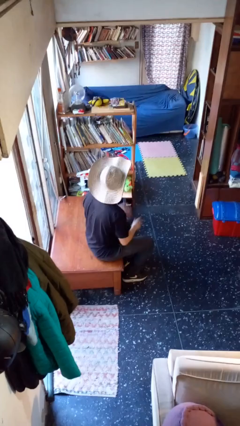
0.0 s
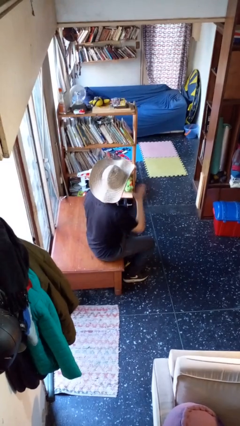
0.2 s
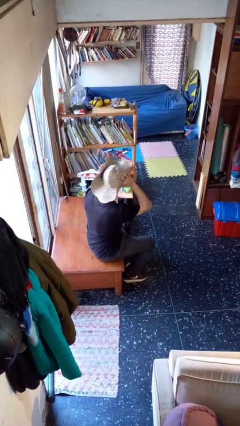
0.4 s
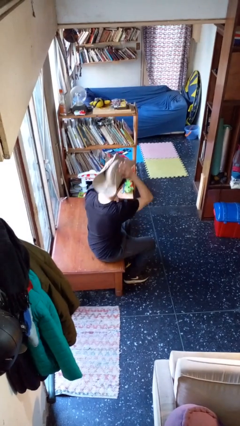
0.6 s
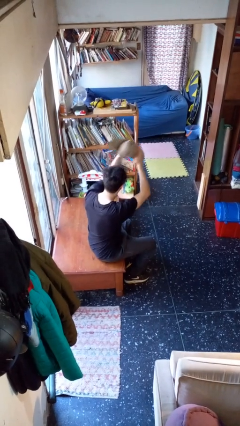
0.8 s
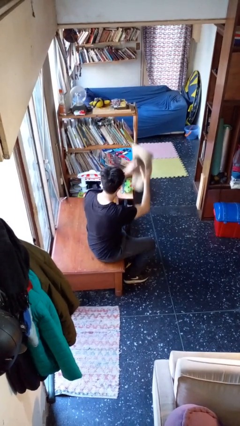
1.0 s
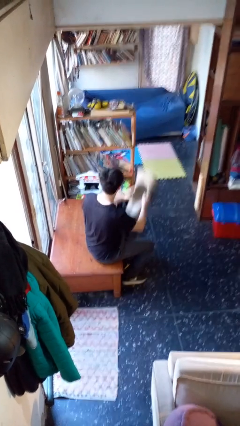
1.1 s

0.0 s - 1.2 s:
person takes off hat

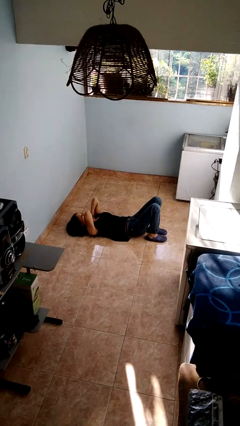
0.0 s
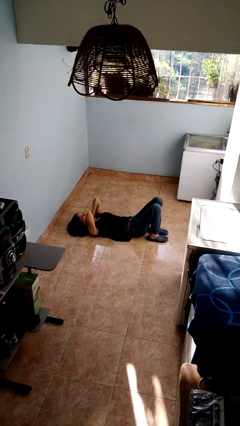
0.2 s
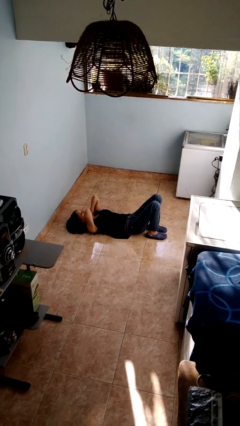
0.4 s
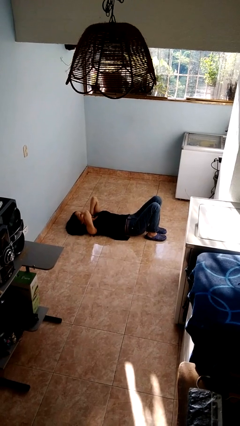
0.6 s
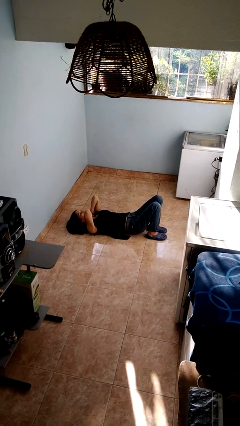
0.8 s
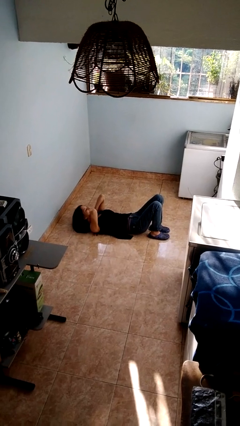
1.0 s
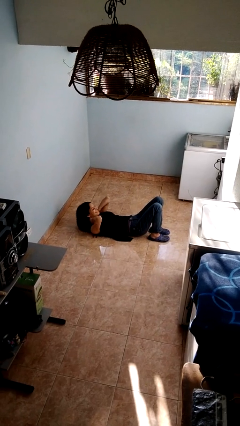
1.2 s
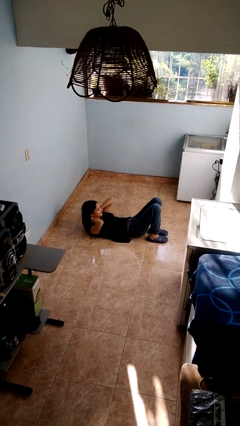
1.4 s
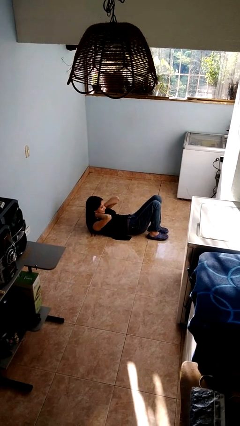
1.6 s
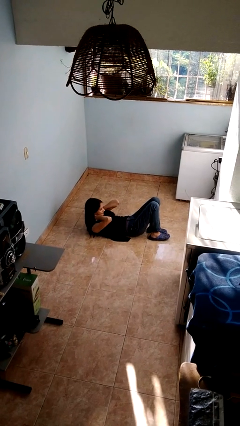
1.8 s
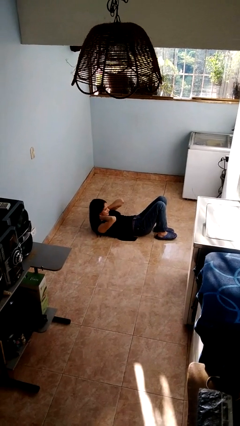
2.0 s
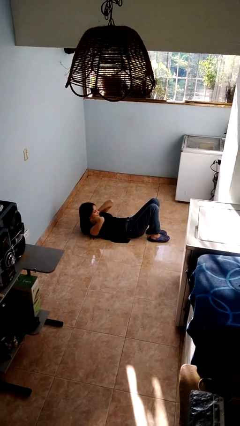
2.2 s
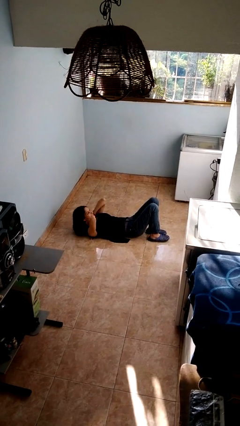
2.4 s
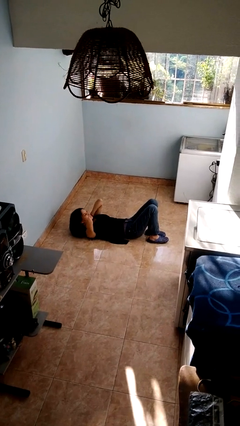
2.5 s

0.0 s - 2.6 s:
person exercises with situp

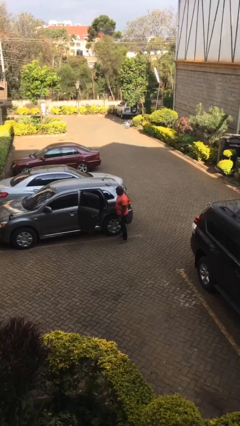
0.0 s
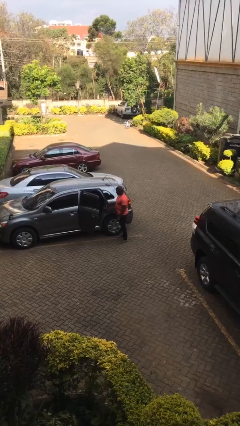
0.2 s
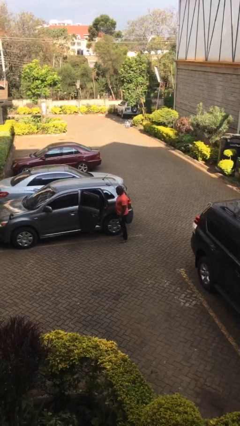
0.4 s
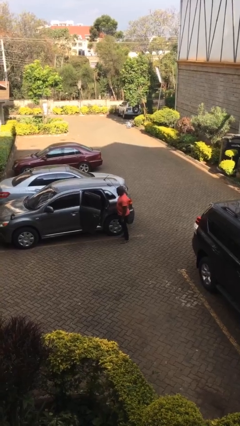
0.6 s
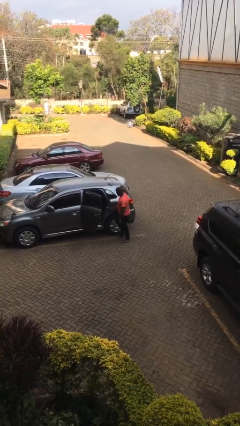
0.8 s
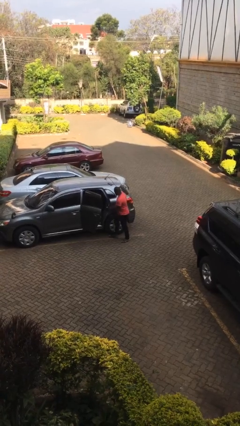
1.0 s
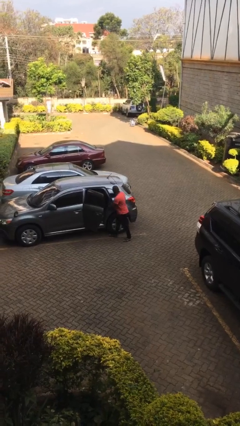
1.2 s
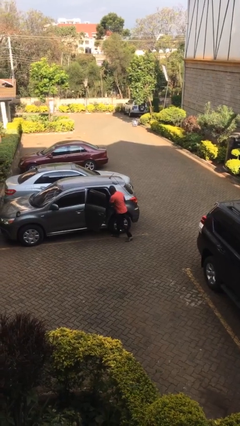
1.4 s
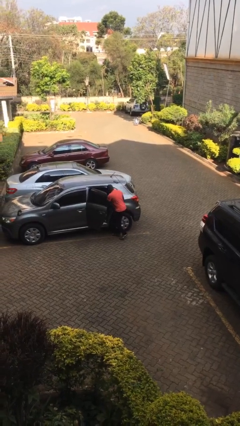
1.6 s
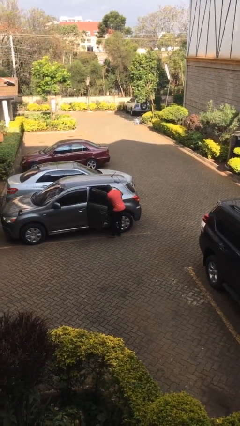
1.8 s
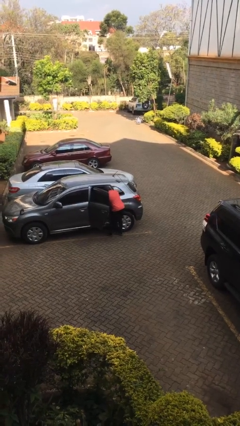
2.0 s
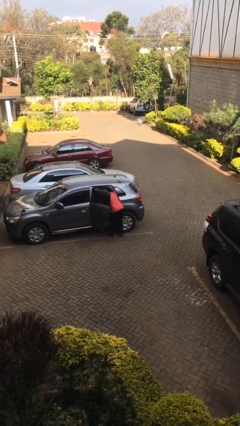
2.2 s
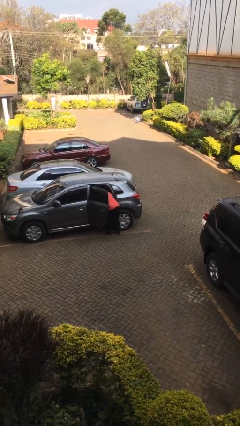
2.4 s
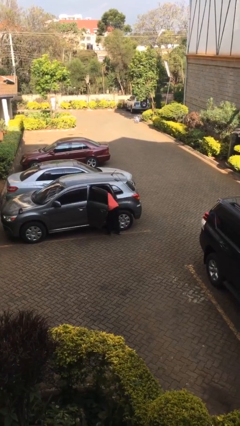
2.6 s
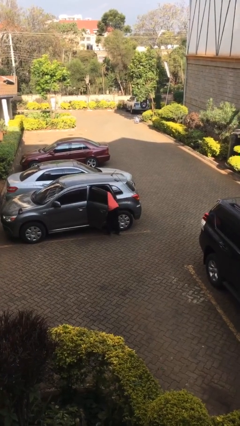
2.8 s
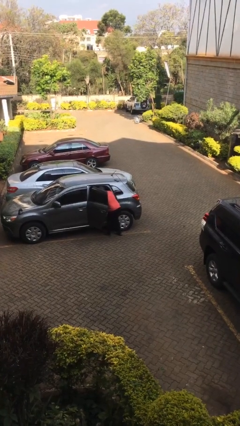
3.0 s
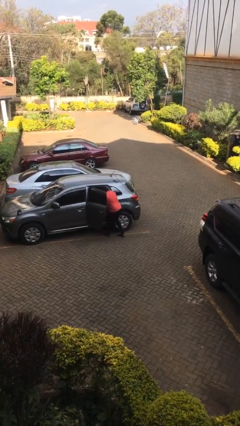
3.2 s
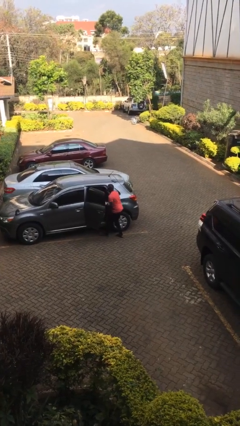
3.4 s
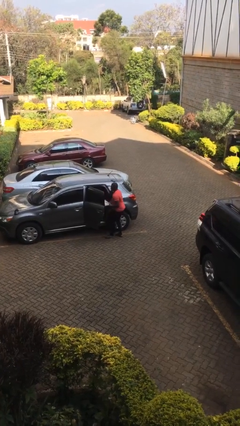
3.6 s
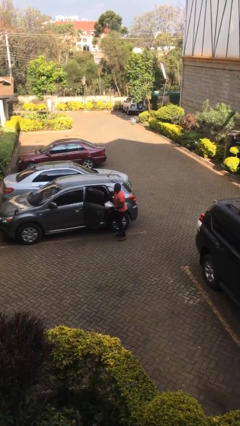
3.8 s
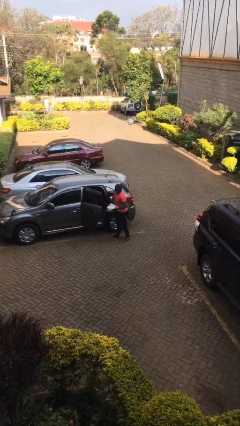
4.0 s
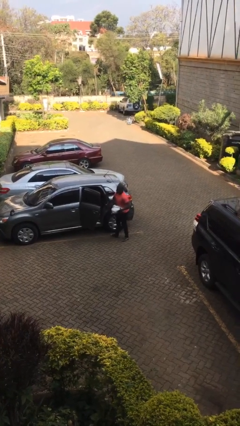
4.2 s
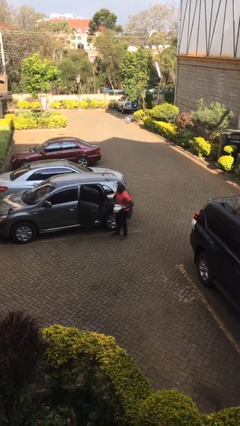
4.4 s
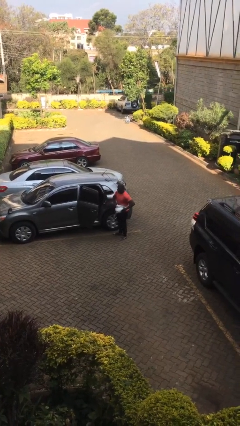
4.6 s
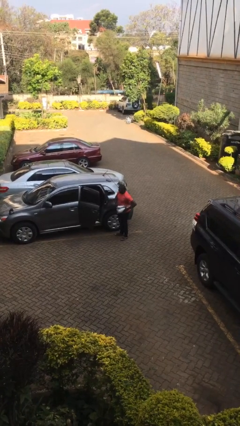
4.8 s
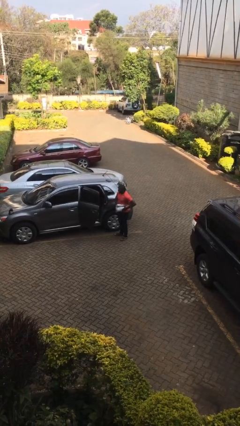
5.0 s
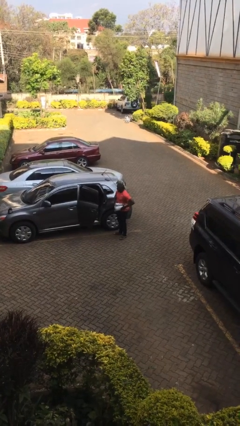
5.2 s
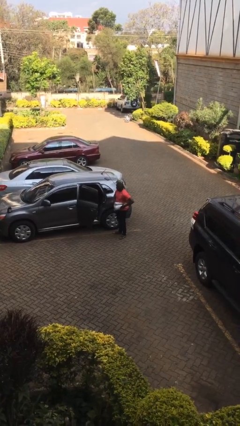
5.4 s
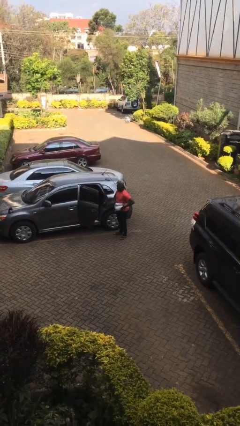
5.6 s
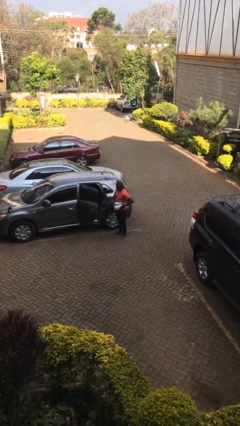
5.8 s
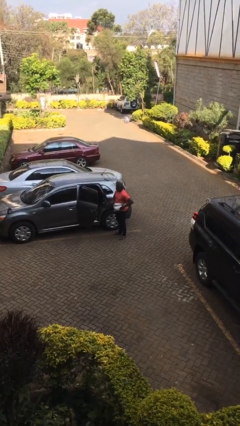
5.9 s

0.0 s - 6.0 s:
person unloads car

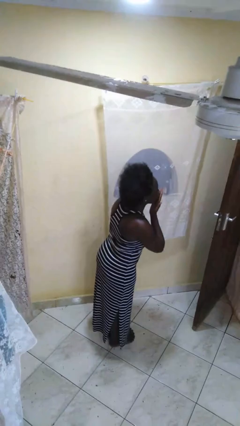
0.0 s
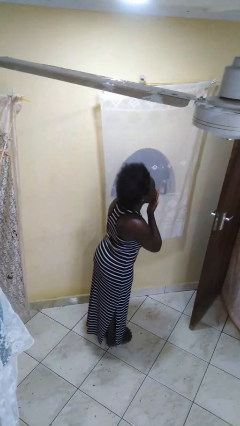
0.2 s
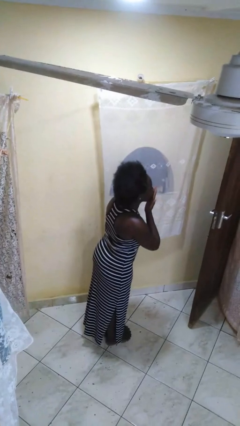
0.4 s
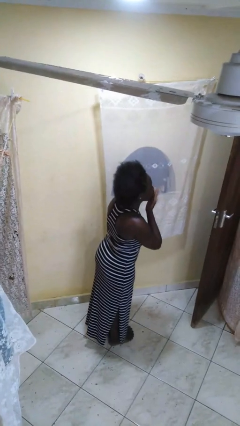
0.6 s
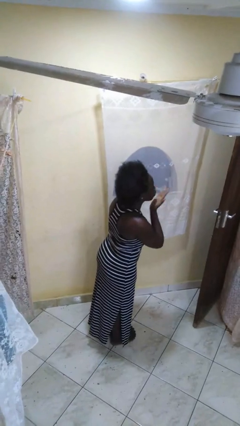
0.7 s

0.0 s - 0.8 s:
person gestures blow kiss

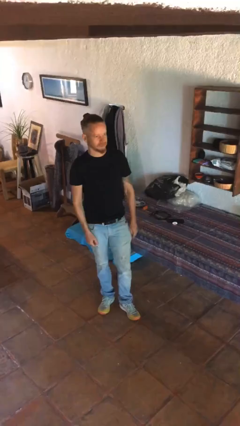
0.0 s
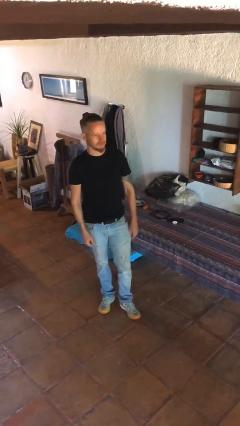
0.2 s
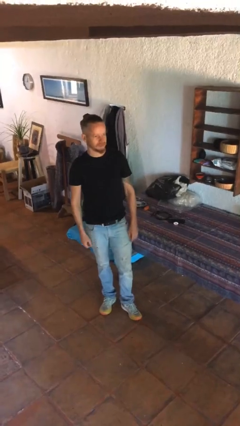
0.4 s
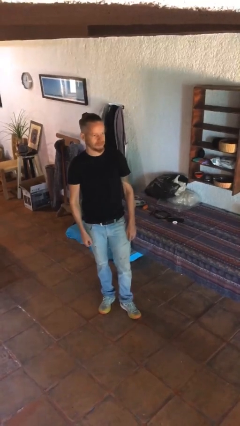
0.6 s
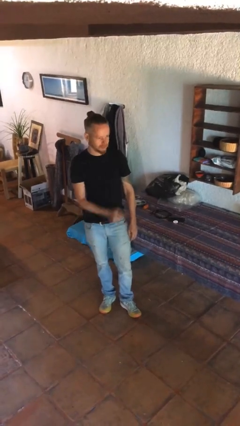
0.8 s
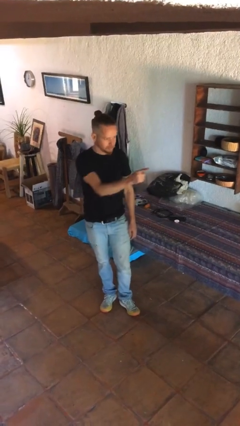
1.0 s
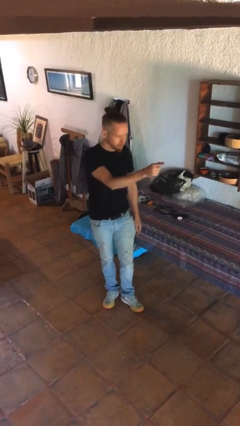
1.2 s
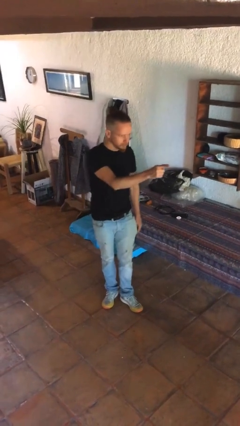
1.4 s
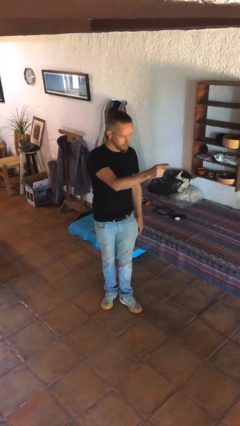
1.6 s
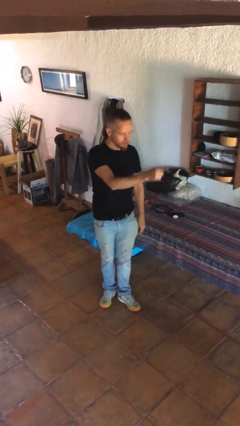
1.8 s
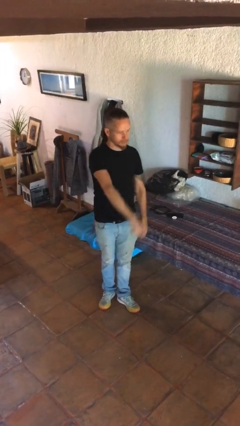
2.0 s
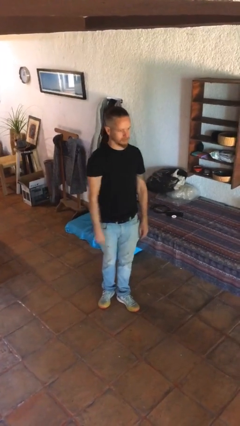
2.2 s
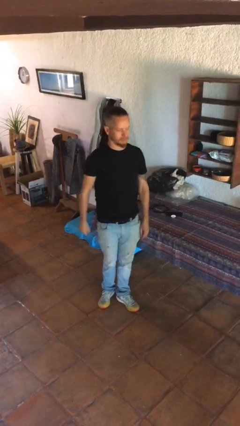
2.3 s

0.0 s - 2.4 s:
person points at person

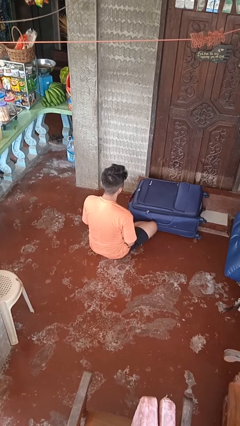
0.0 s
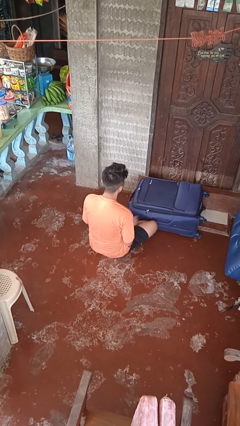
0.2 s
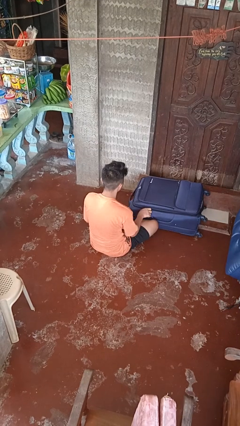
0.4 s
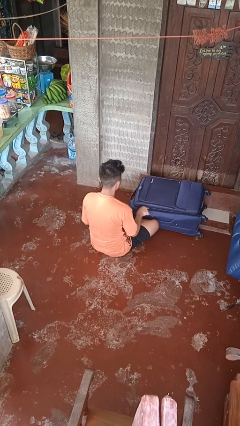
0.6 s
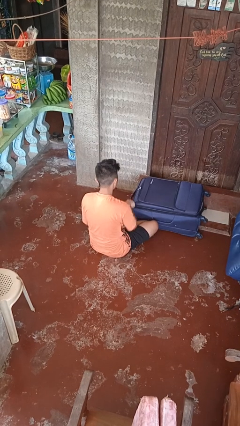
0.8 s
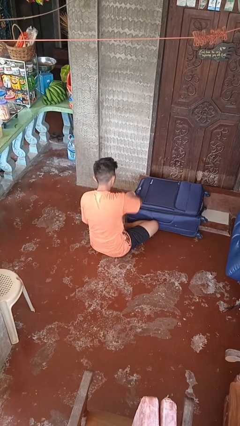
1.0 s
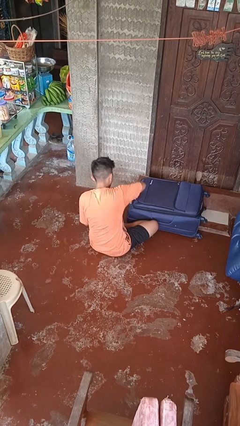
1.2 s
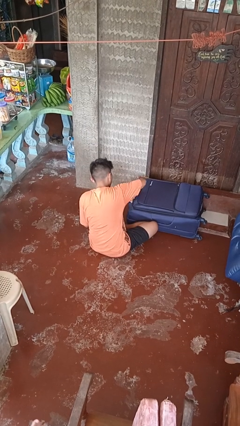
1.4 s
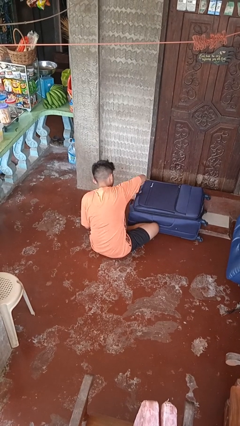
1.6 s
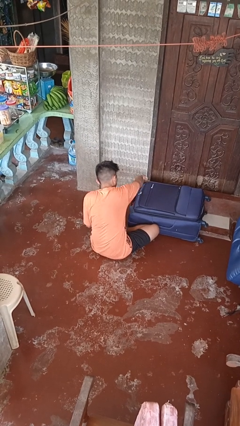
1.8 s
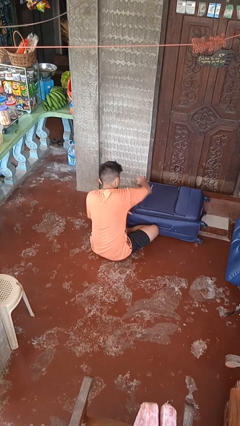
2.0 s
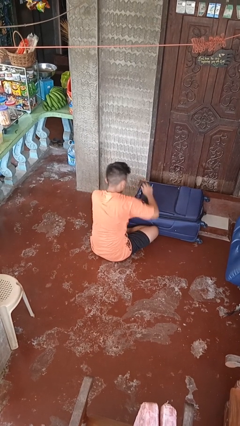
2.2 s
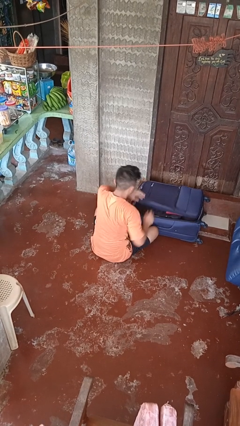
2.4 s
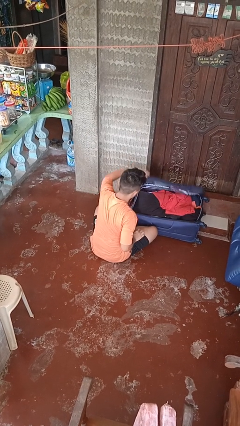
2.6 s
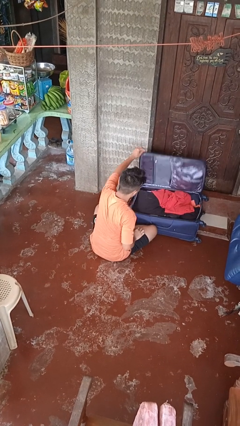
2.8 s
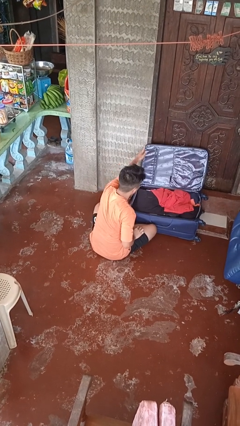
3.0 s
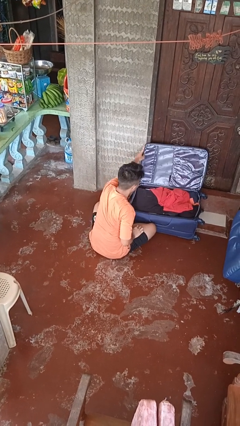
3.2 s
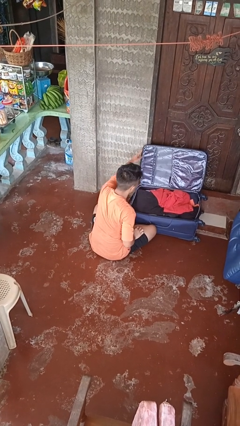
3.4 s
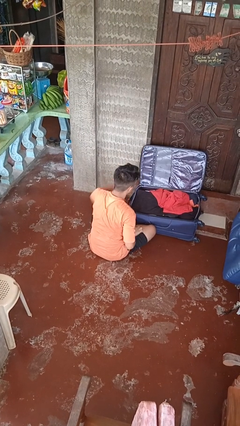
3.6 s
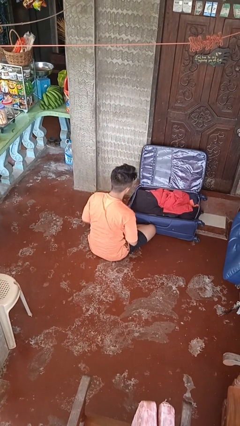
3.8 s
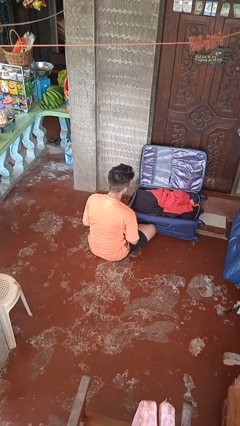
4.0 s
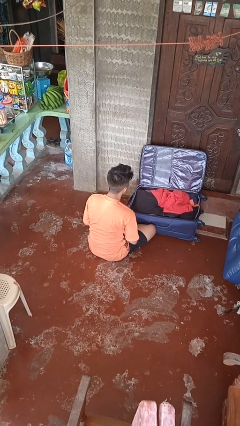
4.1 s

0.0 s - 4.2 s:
person opens suitcase

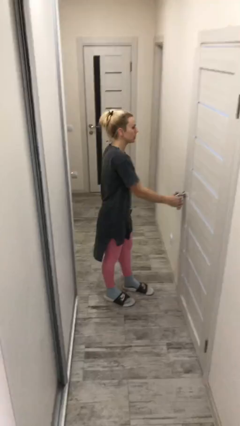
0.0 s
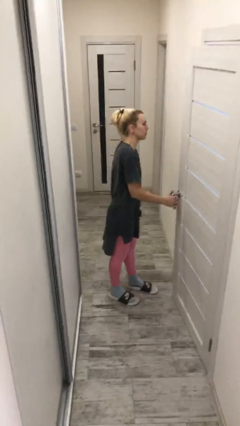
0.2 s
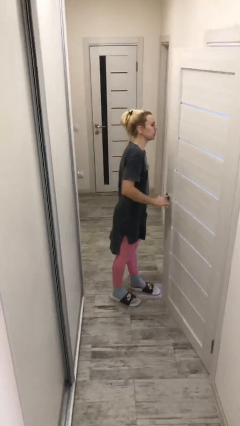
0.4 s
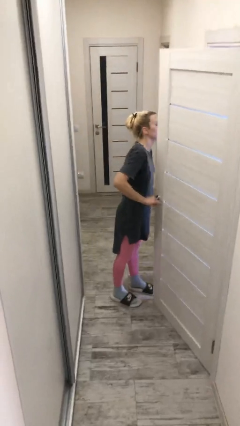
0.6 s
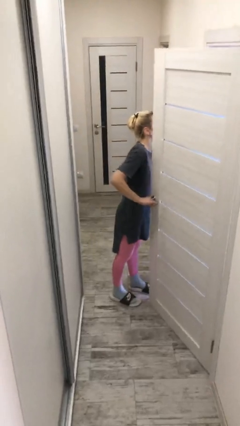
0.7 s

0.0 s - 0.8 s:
person opens facility door
